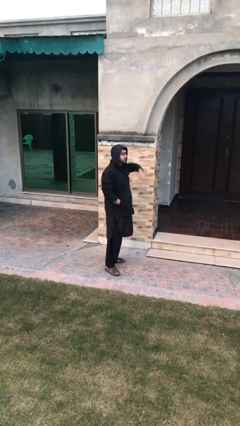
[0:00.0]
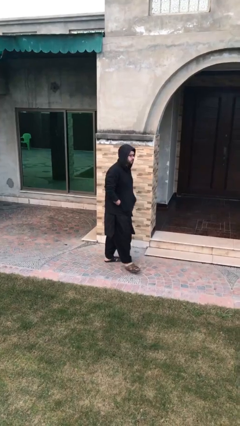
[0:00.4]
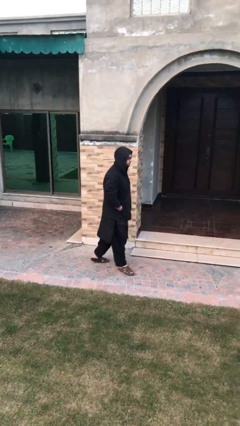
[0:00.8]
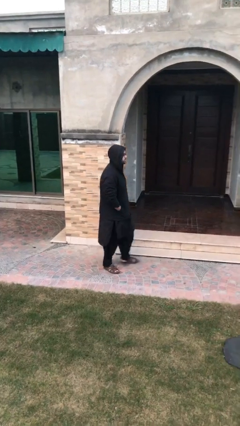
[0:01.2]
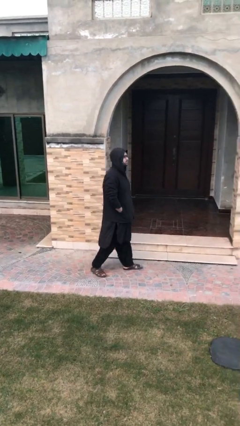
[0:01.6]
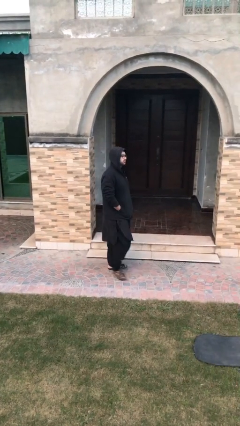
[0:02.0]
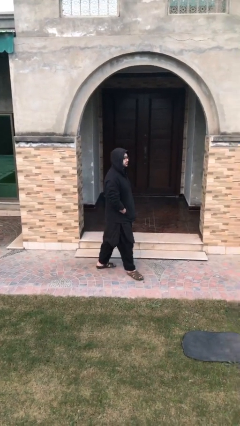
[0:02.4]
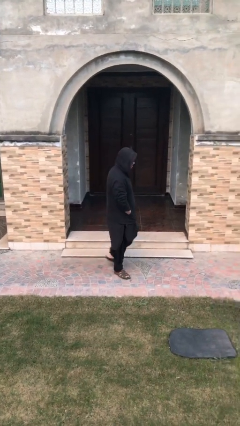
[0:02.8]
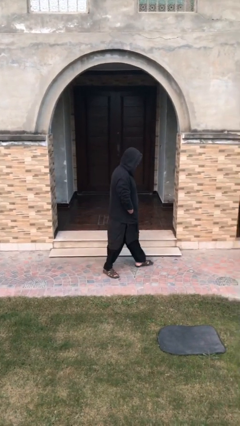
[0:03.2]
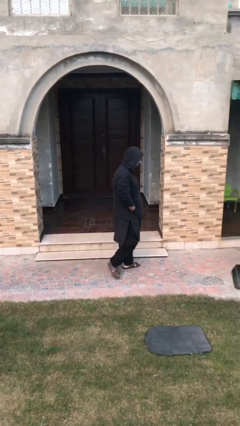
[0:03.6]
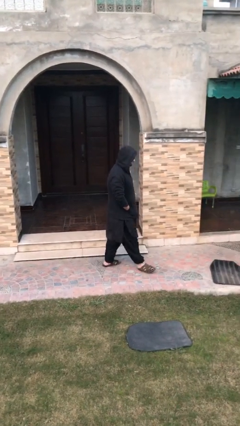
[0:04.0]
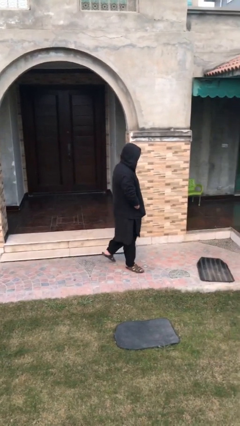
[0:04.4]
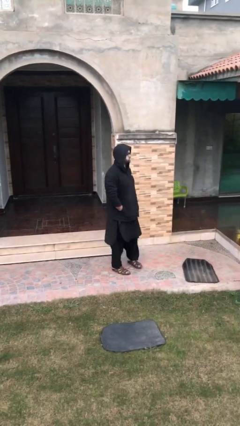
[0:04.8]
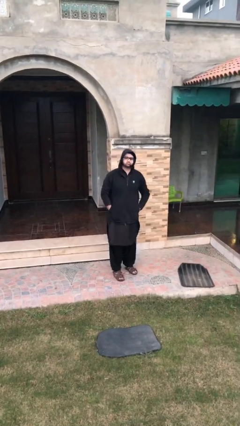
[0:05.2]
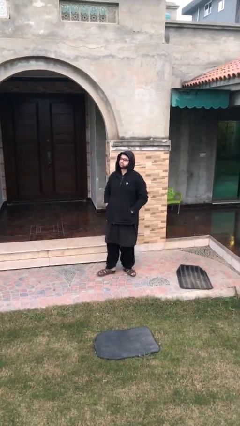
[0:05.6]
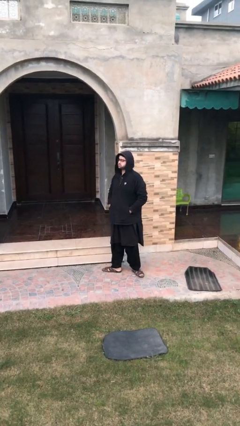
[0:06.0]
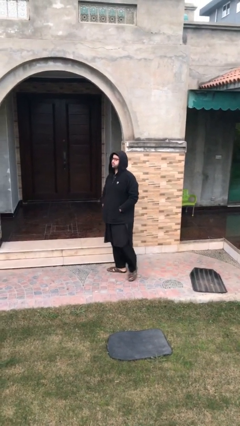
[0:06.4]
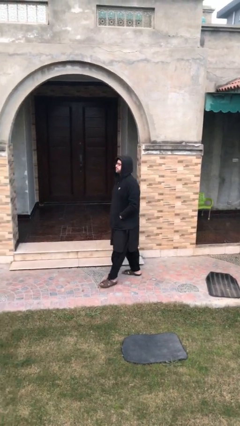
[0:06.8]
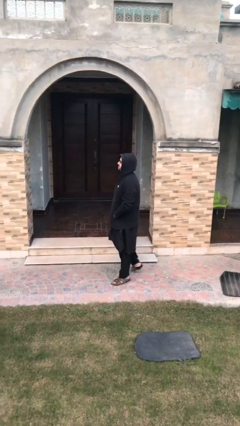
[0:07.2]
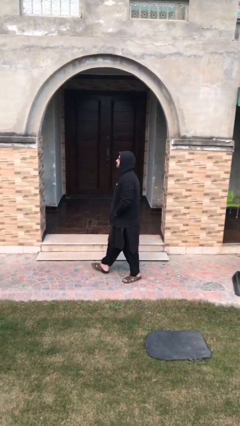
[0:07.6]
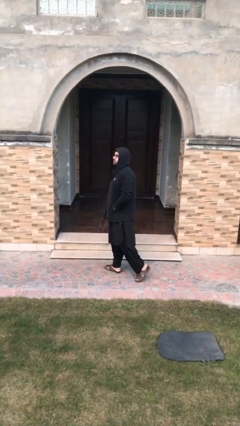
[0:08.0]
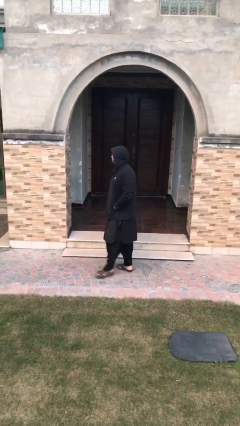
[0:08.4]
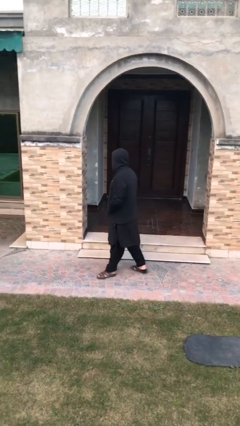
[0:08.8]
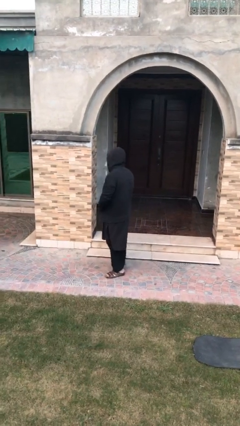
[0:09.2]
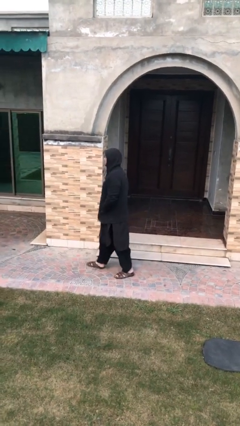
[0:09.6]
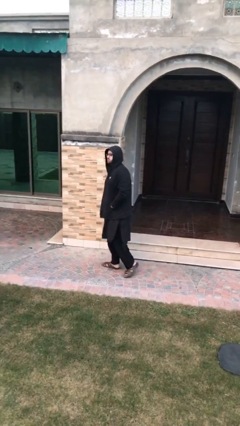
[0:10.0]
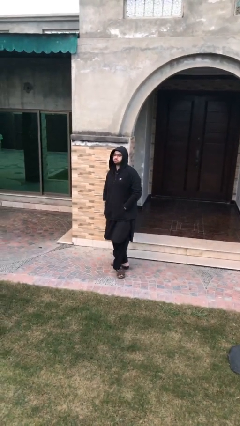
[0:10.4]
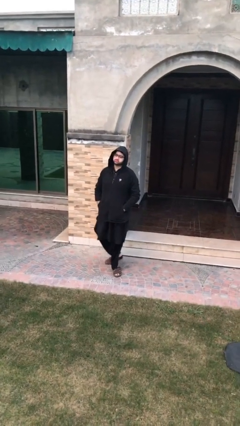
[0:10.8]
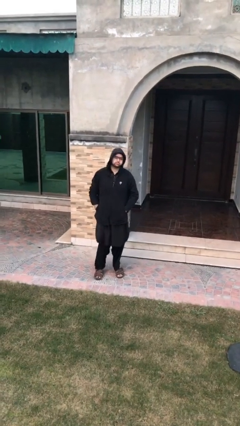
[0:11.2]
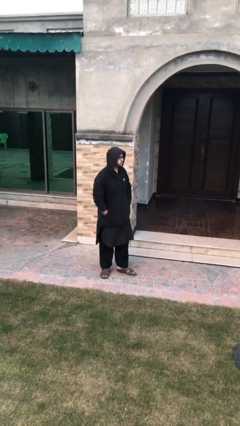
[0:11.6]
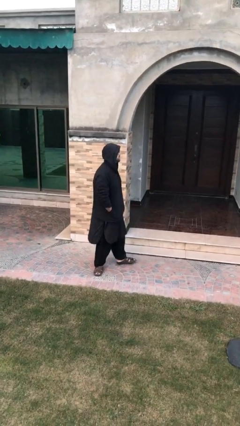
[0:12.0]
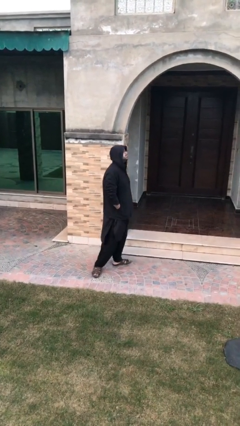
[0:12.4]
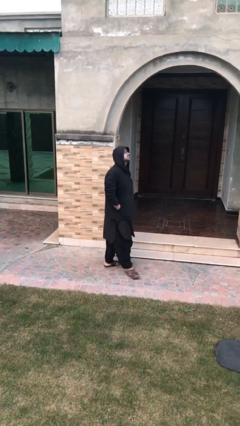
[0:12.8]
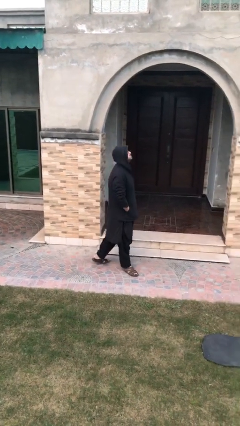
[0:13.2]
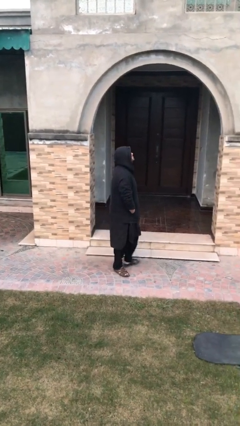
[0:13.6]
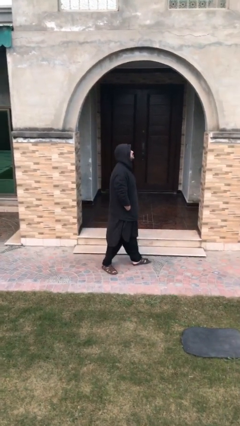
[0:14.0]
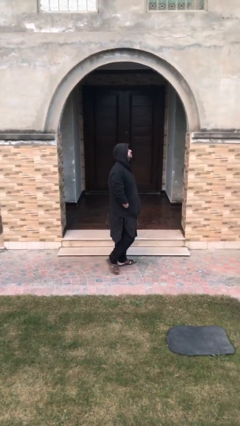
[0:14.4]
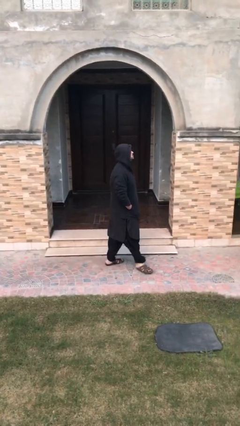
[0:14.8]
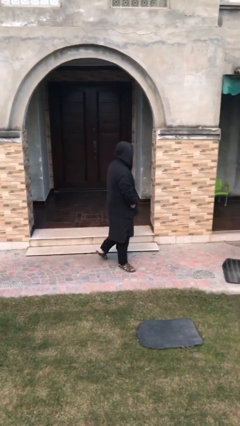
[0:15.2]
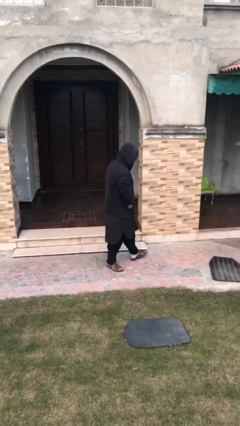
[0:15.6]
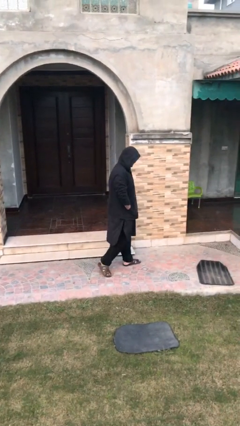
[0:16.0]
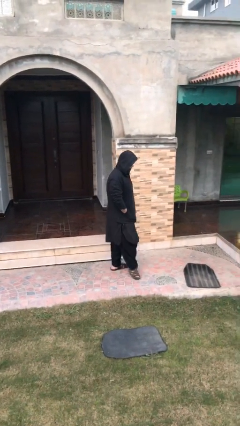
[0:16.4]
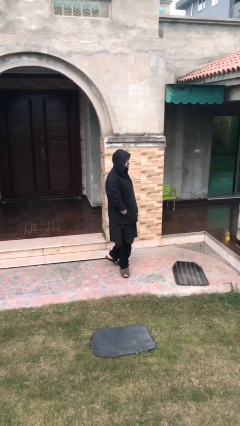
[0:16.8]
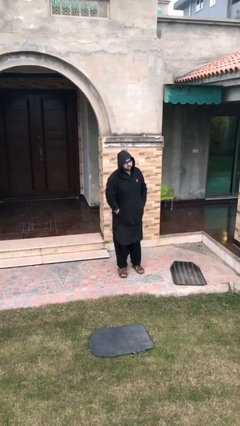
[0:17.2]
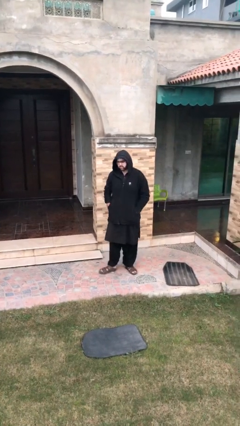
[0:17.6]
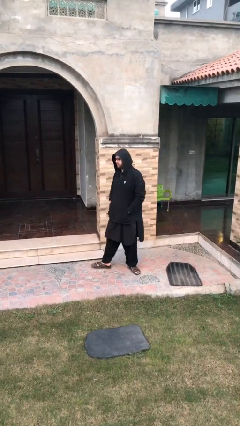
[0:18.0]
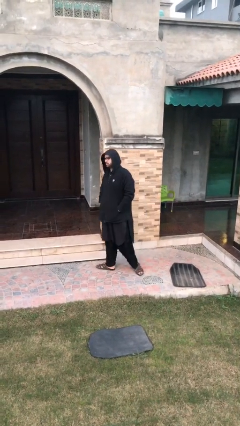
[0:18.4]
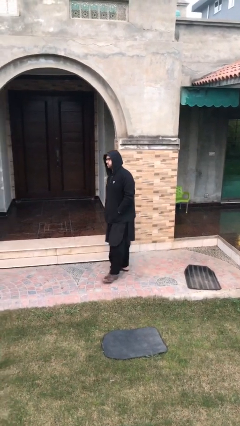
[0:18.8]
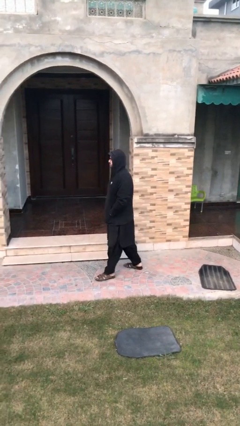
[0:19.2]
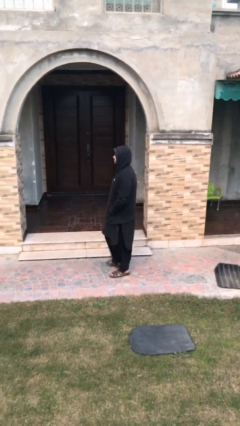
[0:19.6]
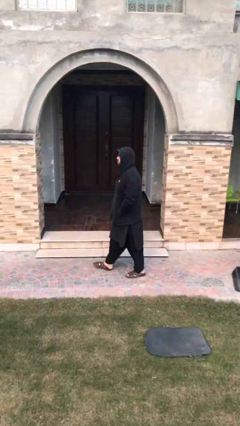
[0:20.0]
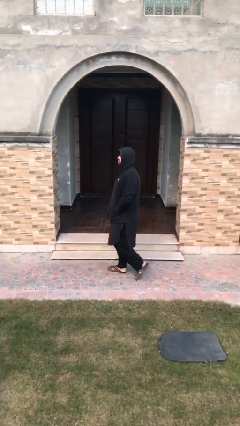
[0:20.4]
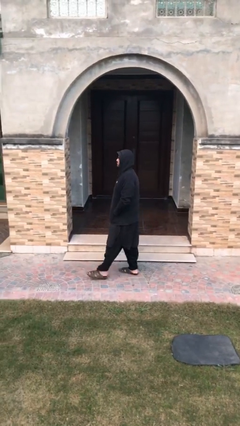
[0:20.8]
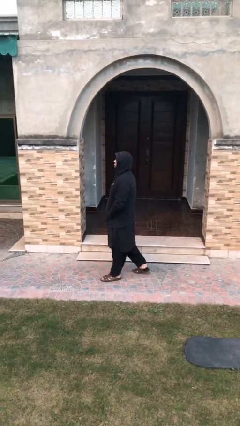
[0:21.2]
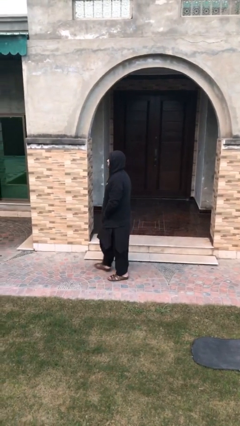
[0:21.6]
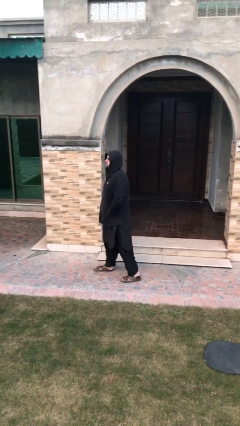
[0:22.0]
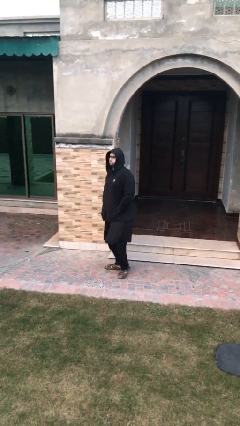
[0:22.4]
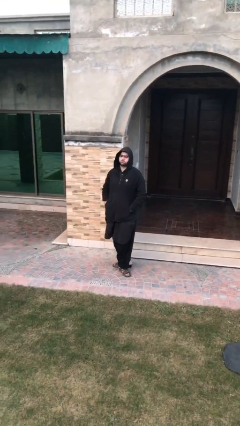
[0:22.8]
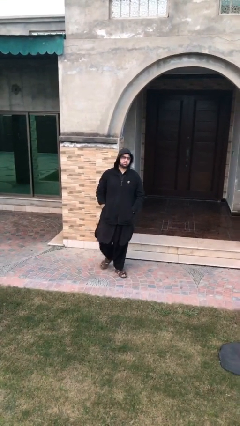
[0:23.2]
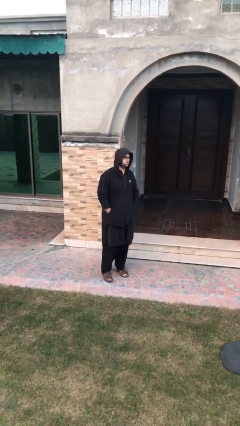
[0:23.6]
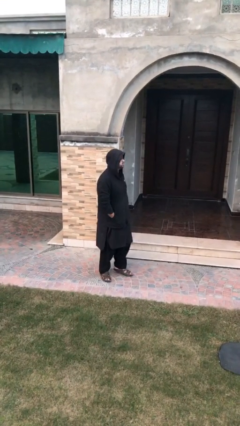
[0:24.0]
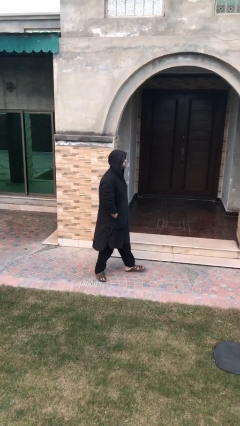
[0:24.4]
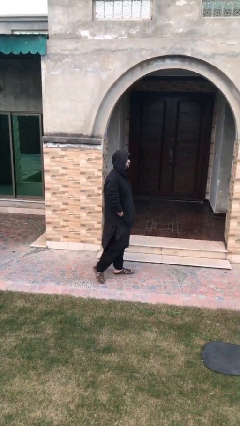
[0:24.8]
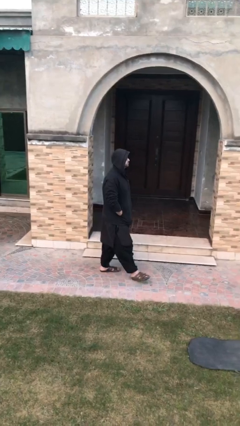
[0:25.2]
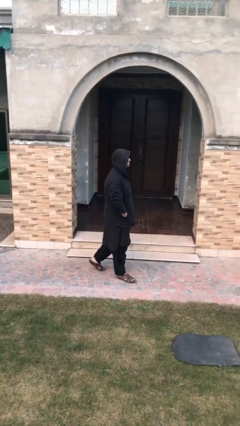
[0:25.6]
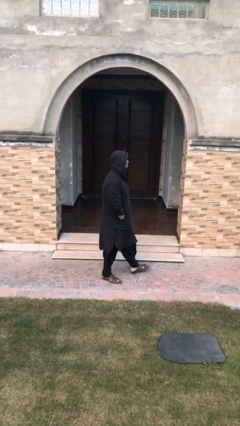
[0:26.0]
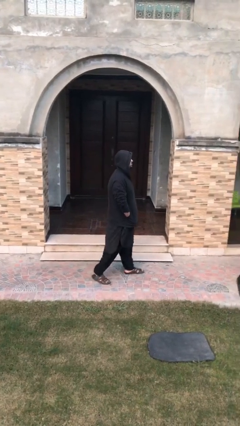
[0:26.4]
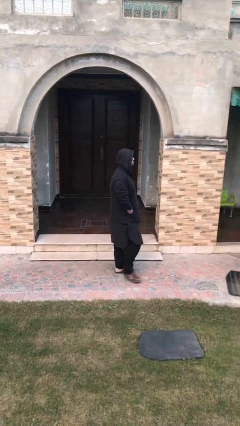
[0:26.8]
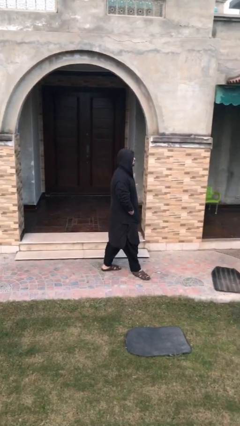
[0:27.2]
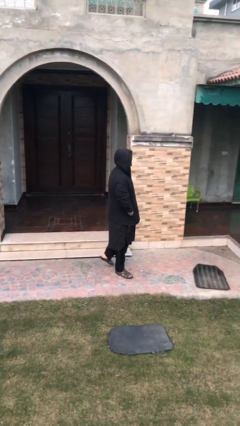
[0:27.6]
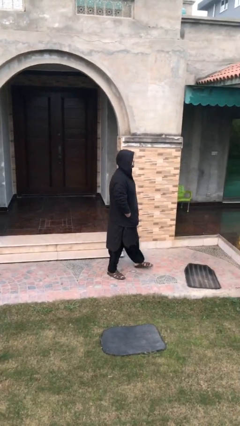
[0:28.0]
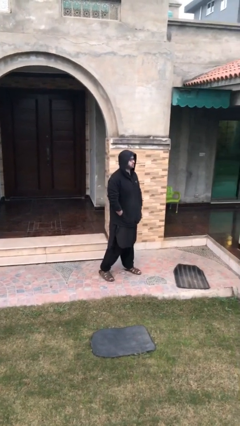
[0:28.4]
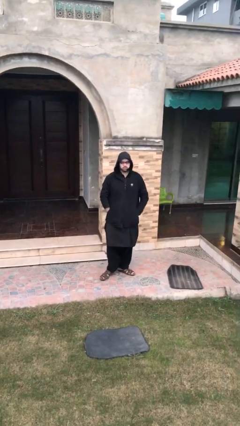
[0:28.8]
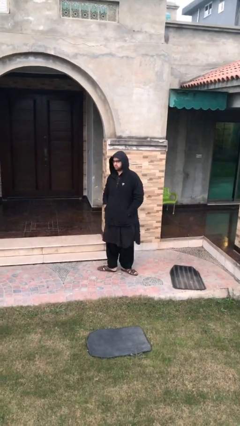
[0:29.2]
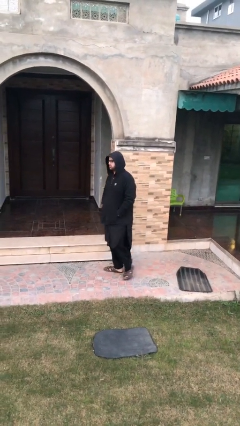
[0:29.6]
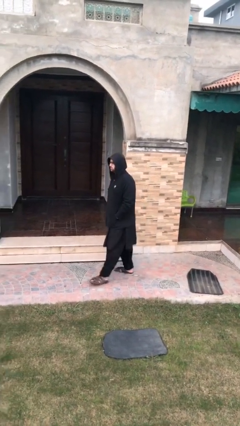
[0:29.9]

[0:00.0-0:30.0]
person walks

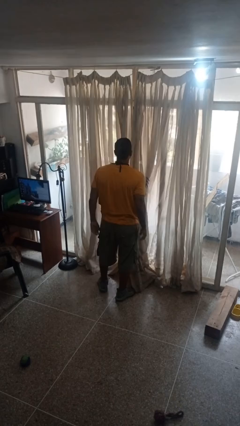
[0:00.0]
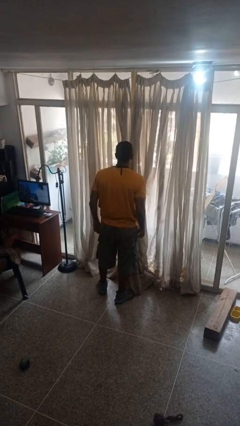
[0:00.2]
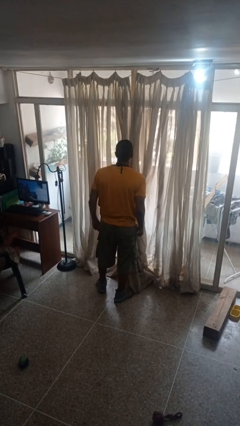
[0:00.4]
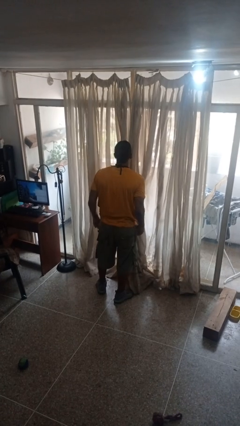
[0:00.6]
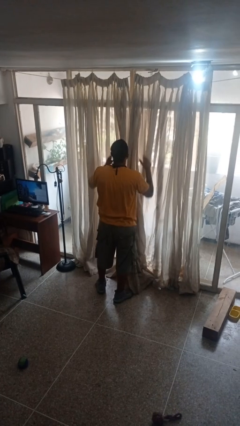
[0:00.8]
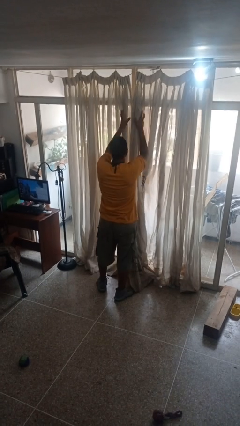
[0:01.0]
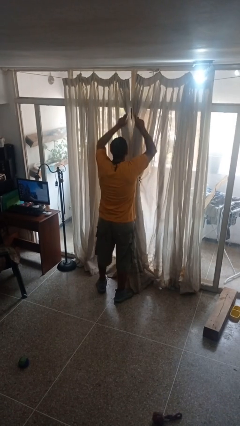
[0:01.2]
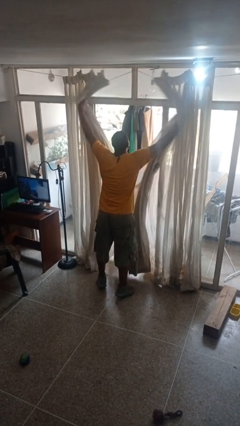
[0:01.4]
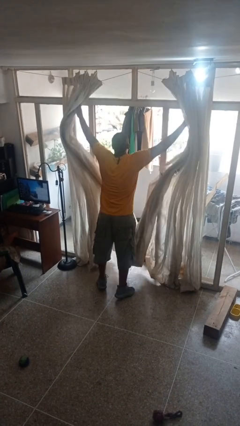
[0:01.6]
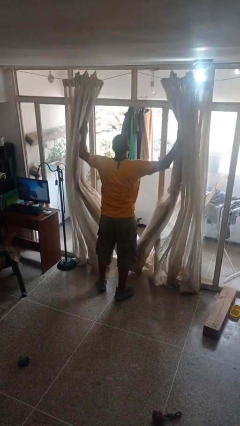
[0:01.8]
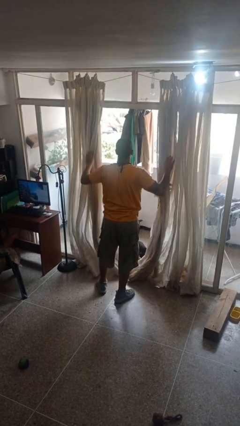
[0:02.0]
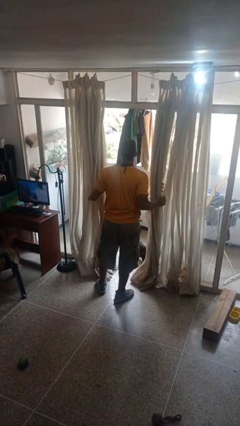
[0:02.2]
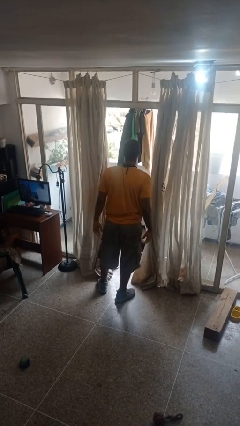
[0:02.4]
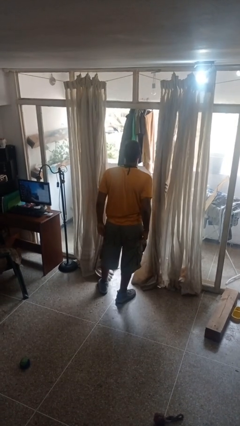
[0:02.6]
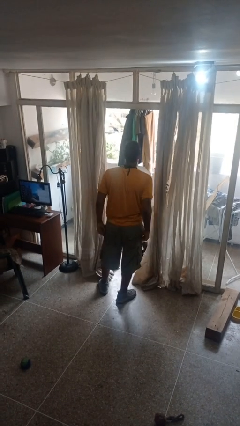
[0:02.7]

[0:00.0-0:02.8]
person opens curtains

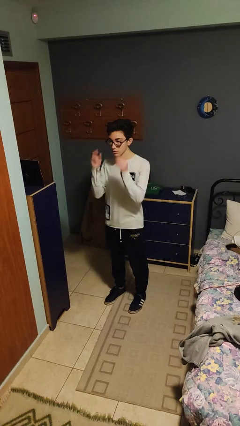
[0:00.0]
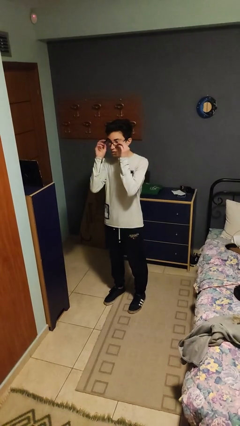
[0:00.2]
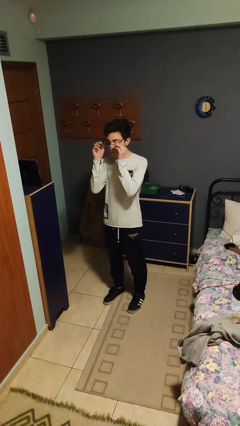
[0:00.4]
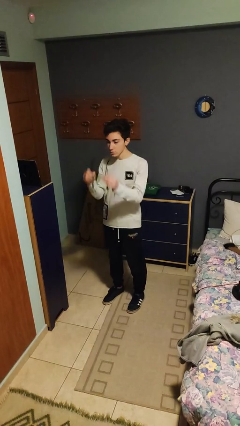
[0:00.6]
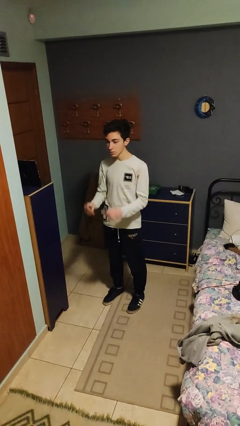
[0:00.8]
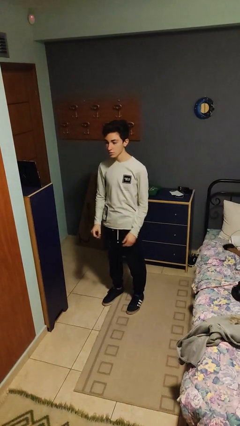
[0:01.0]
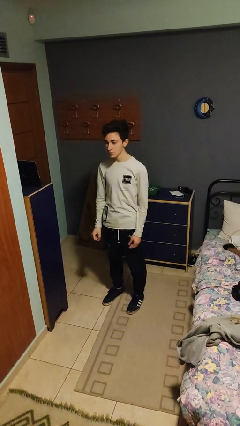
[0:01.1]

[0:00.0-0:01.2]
person takes off glasses
